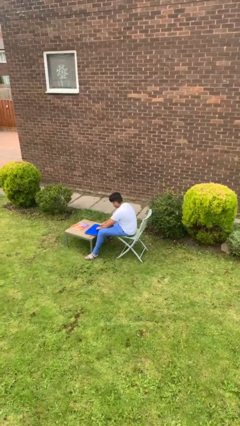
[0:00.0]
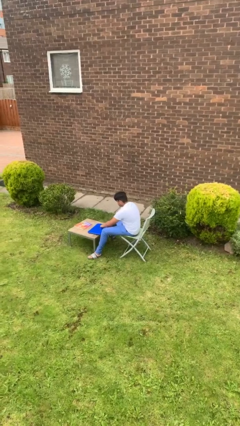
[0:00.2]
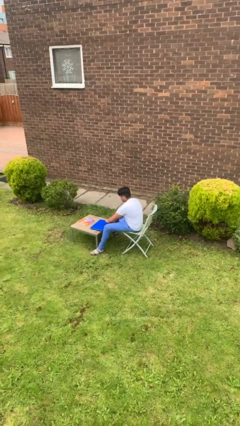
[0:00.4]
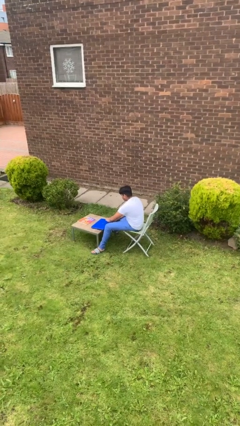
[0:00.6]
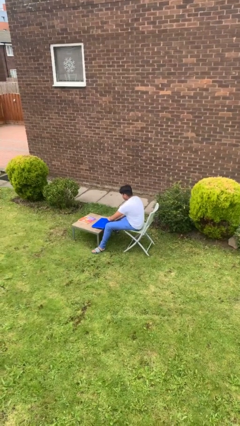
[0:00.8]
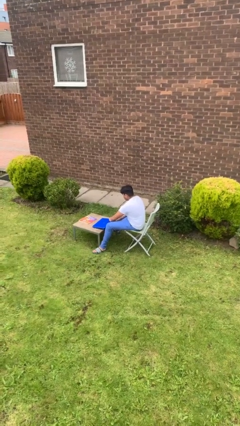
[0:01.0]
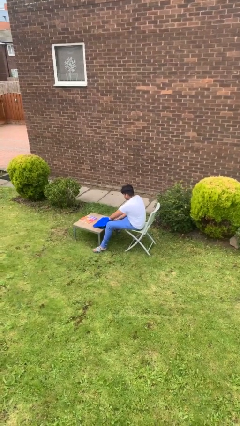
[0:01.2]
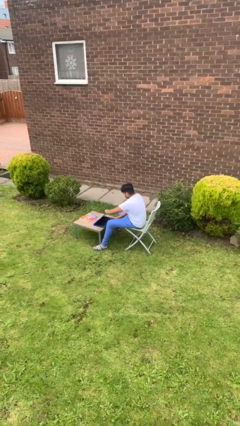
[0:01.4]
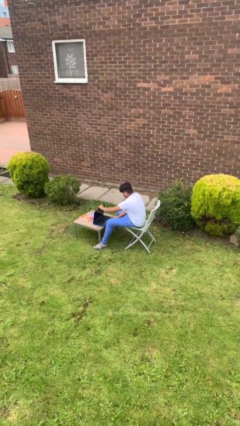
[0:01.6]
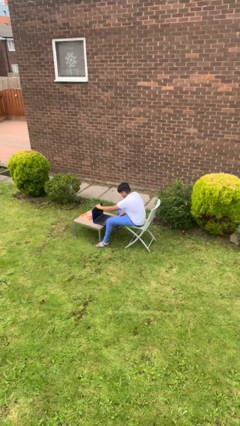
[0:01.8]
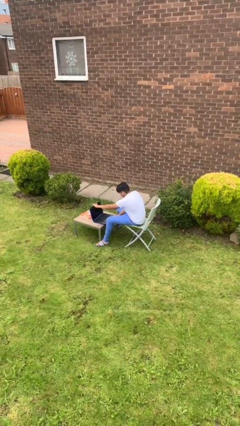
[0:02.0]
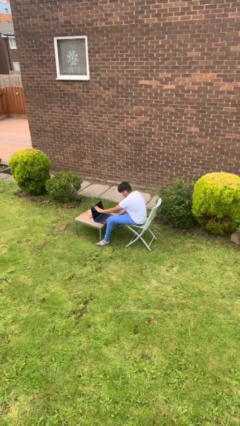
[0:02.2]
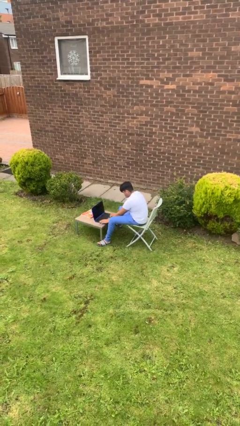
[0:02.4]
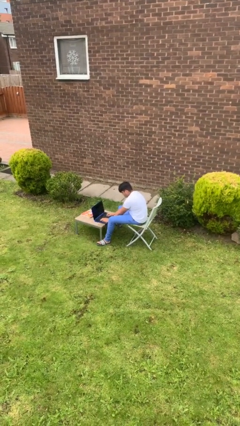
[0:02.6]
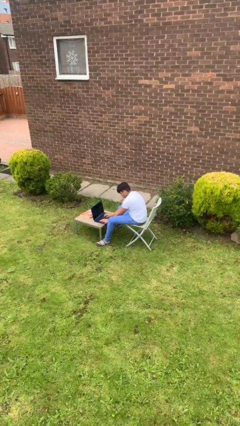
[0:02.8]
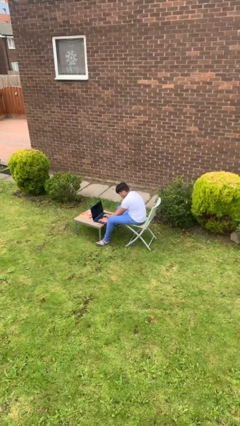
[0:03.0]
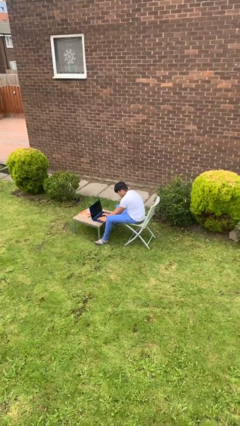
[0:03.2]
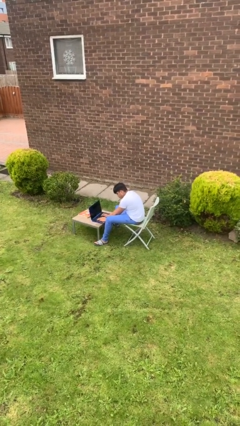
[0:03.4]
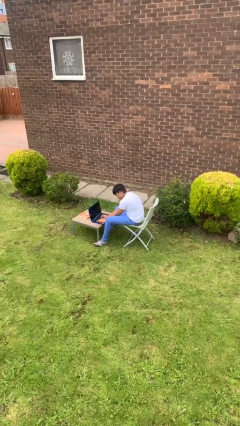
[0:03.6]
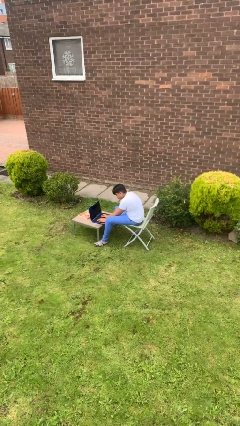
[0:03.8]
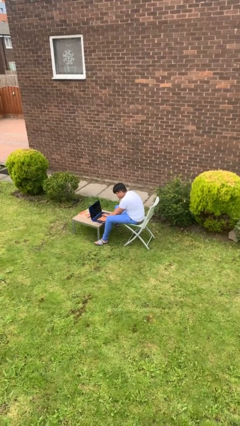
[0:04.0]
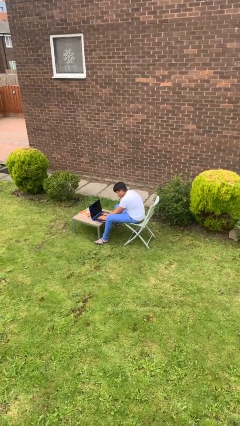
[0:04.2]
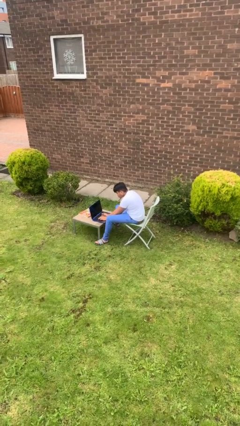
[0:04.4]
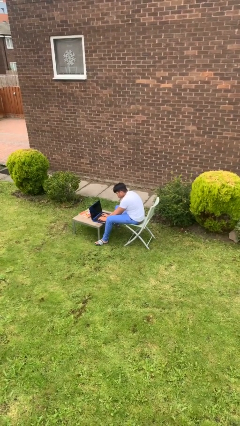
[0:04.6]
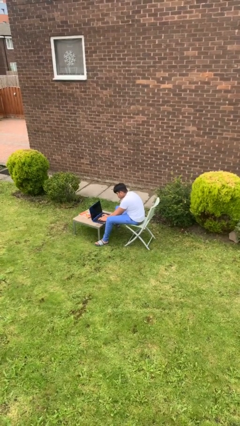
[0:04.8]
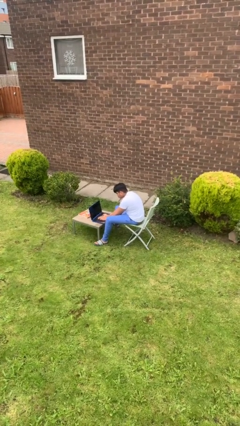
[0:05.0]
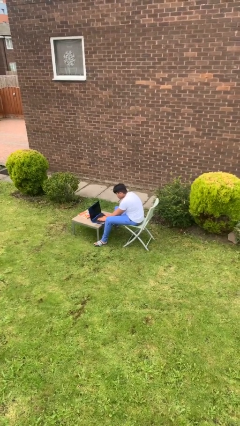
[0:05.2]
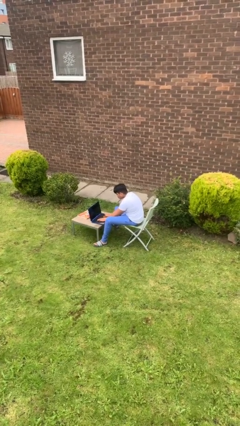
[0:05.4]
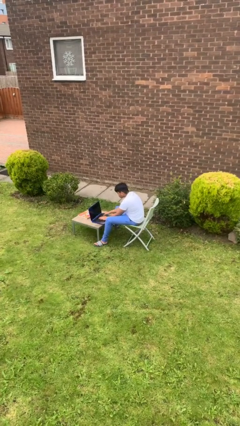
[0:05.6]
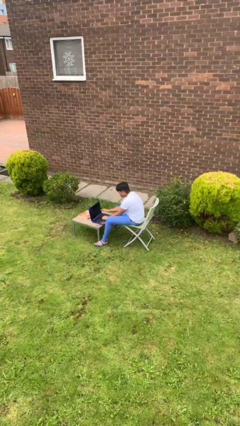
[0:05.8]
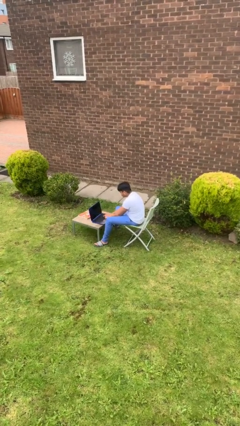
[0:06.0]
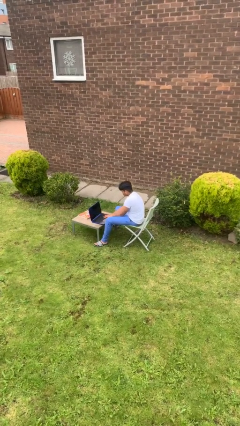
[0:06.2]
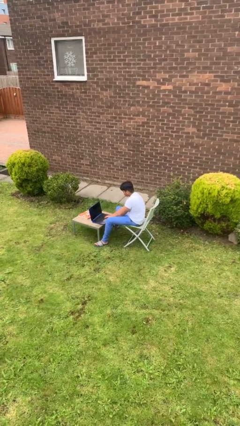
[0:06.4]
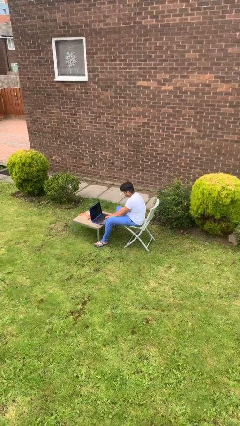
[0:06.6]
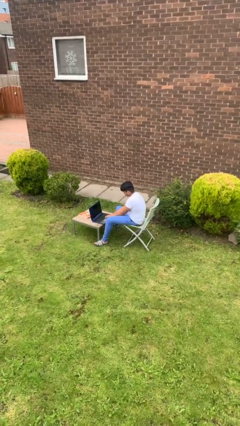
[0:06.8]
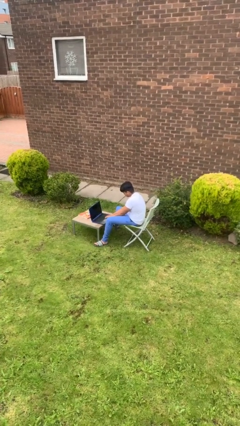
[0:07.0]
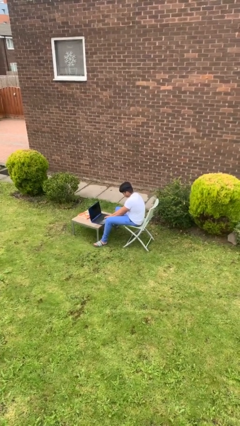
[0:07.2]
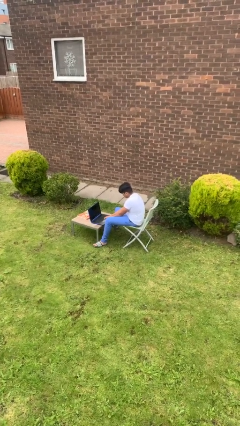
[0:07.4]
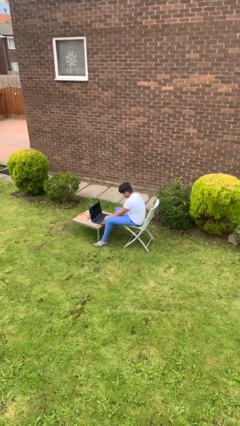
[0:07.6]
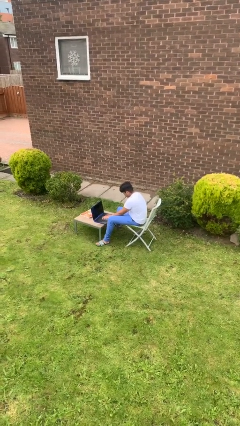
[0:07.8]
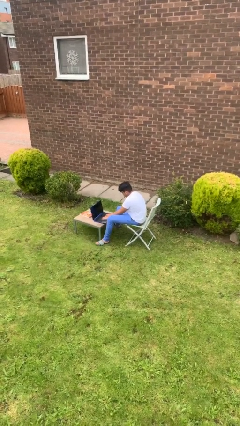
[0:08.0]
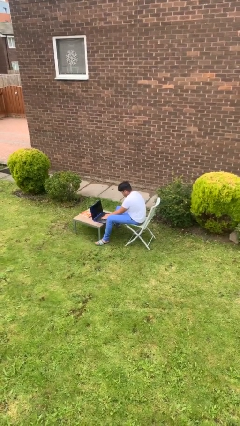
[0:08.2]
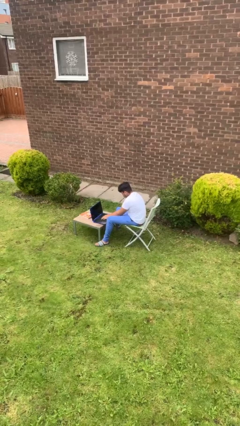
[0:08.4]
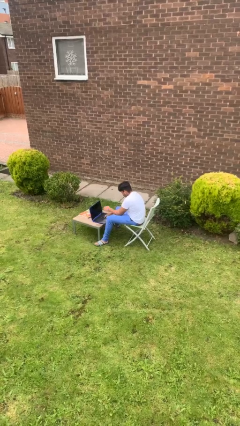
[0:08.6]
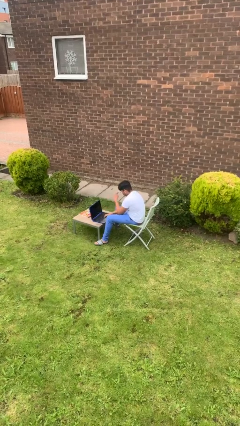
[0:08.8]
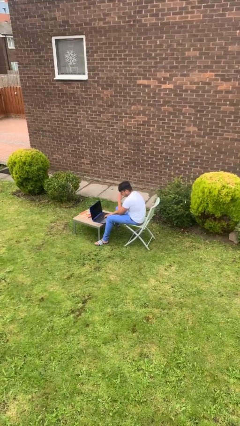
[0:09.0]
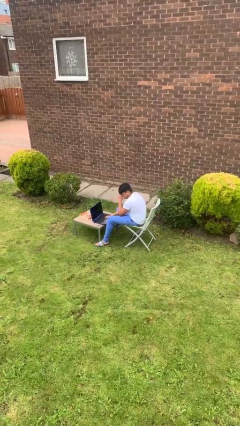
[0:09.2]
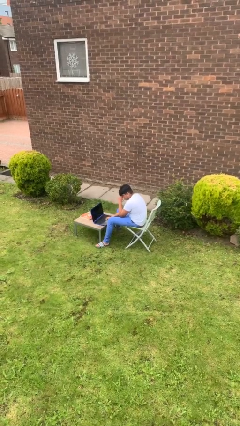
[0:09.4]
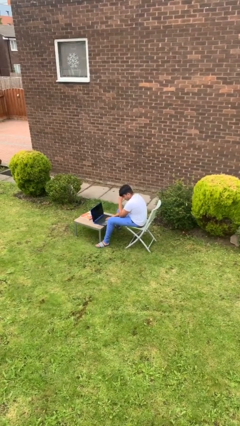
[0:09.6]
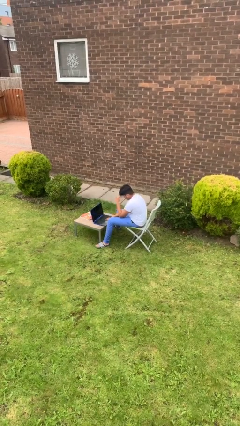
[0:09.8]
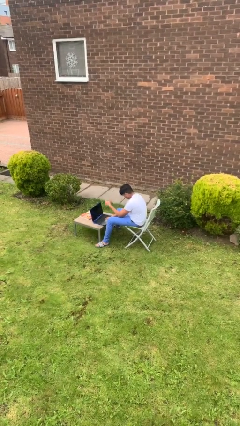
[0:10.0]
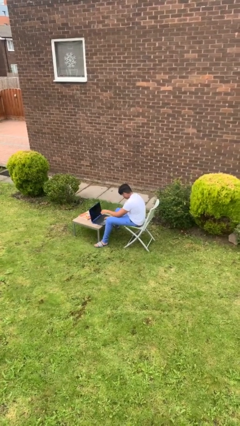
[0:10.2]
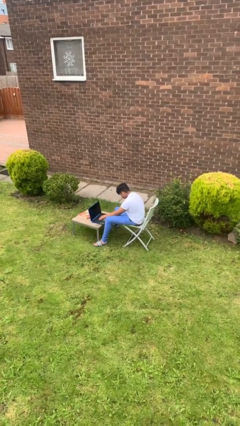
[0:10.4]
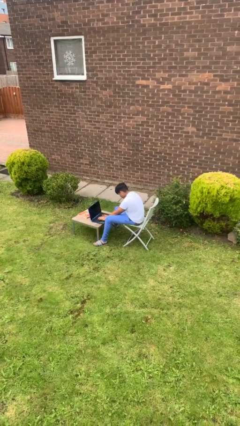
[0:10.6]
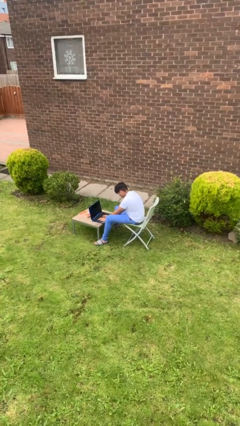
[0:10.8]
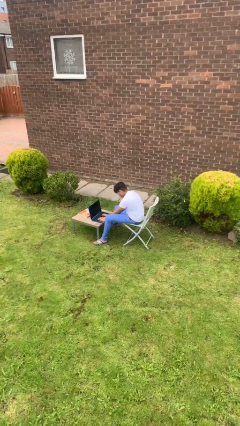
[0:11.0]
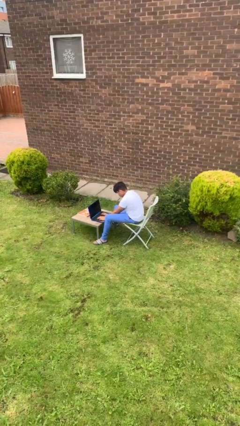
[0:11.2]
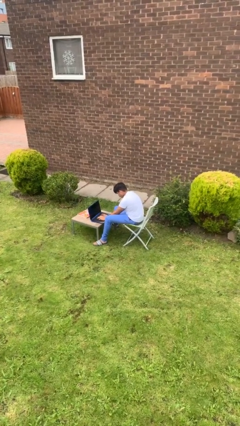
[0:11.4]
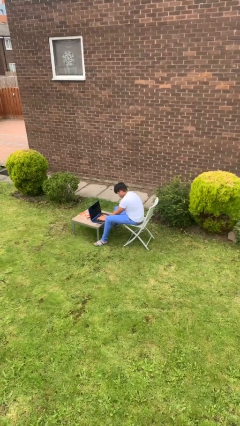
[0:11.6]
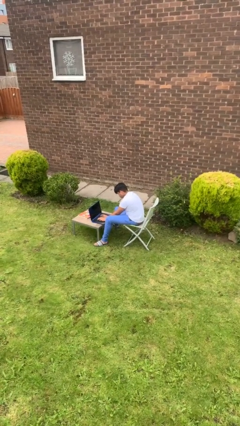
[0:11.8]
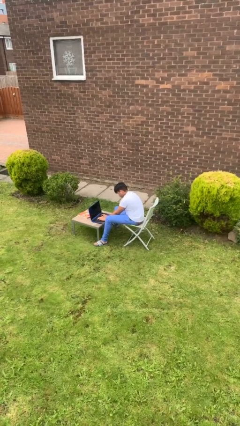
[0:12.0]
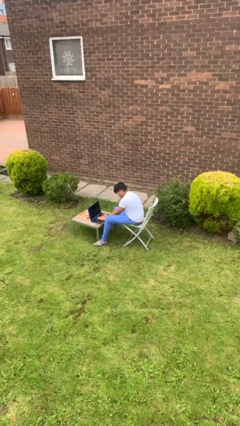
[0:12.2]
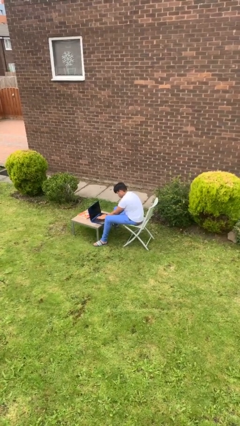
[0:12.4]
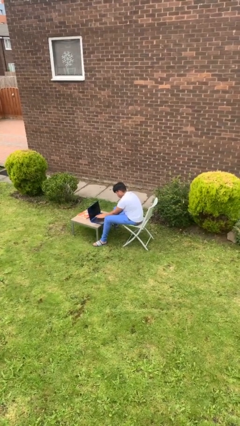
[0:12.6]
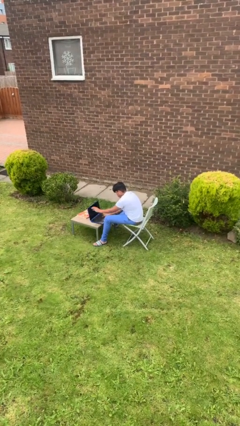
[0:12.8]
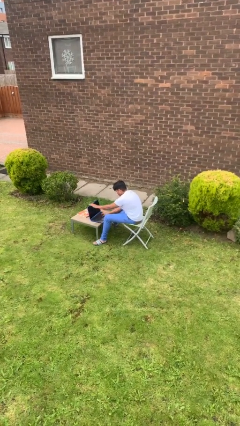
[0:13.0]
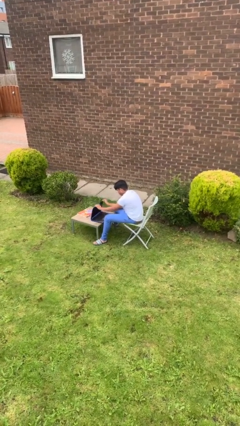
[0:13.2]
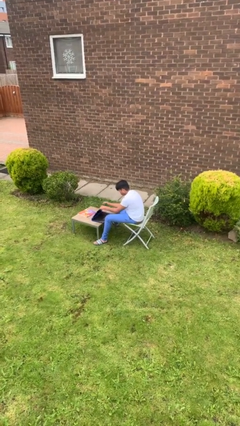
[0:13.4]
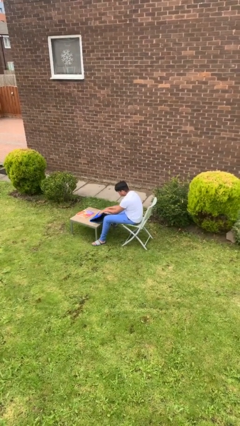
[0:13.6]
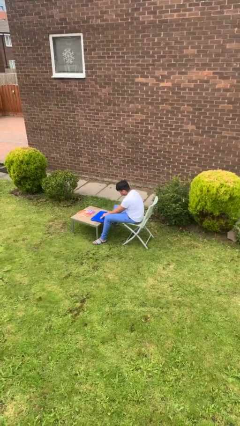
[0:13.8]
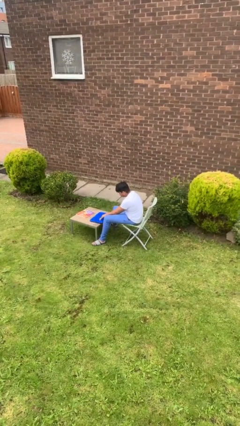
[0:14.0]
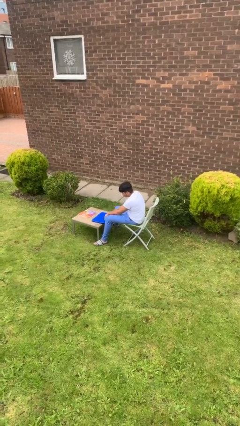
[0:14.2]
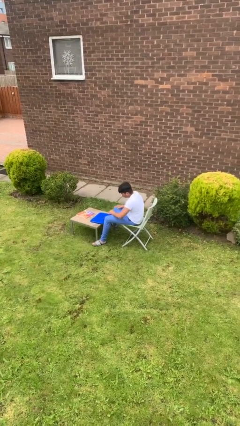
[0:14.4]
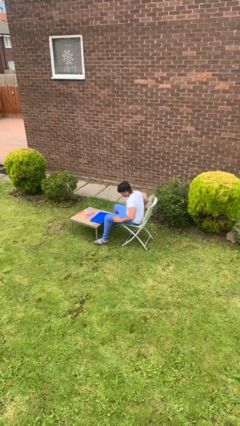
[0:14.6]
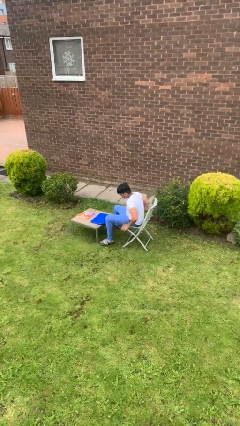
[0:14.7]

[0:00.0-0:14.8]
person interacts with laptop

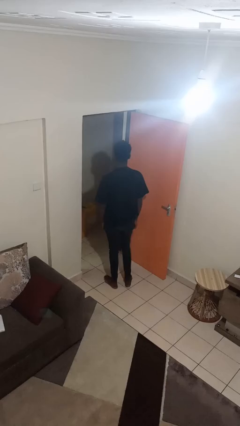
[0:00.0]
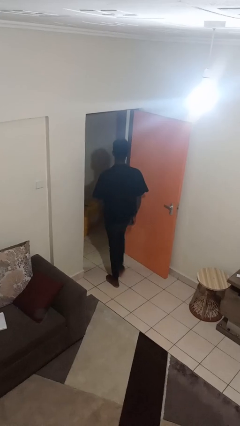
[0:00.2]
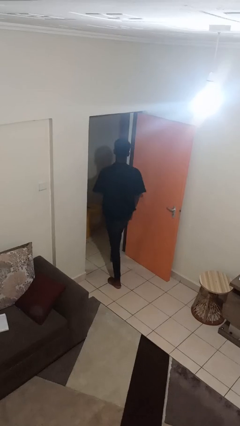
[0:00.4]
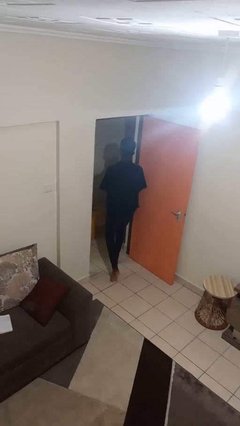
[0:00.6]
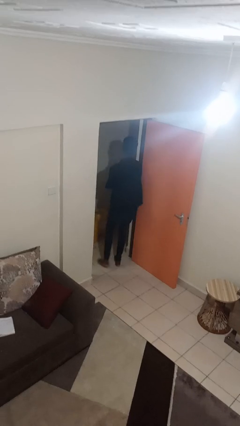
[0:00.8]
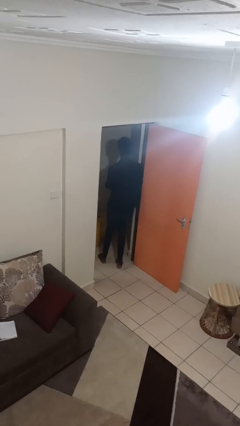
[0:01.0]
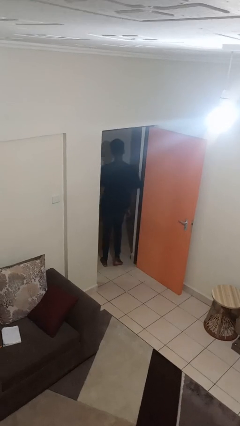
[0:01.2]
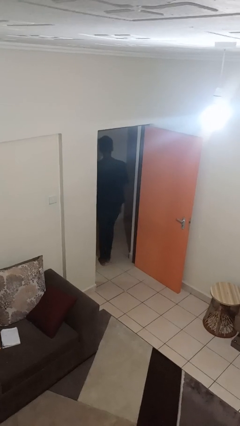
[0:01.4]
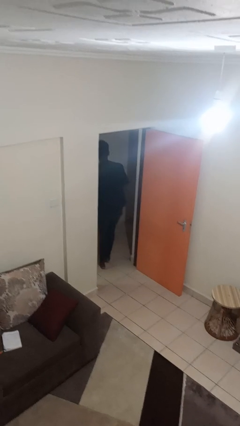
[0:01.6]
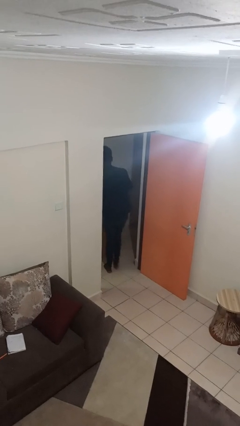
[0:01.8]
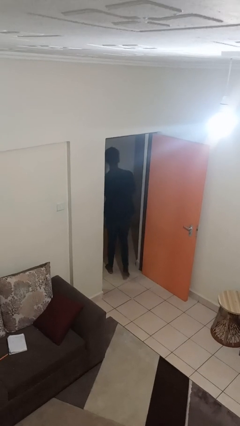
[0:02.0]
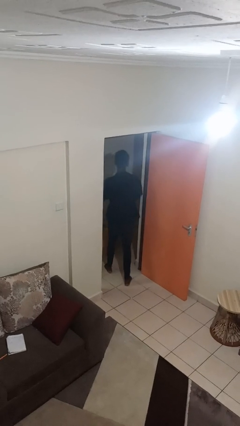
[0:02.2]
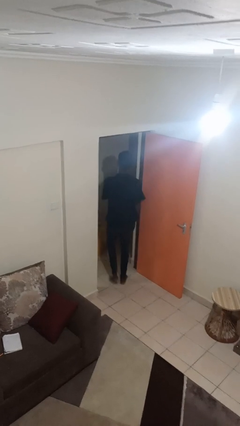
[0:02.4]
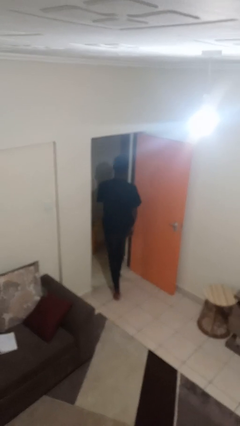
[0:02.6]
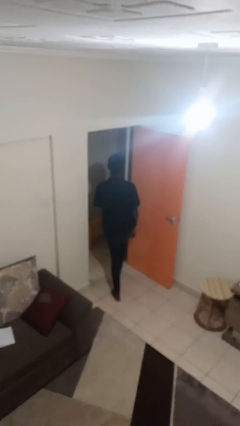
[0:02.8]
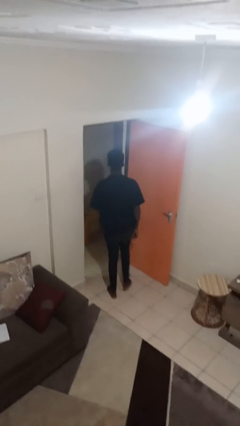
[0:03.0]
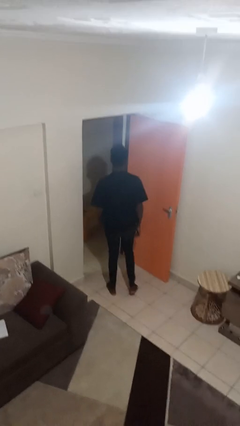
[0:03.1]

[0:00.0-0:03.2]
person bumps into wall
